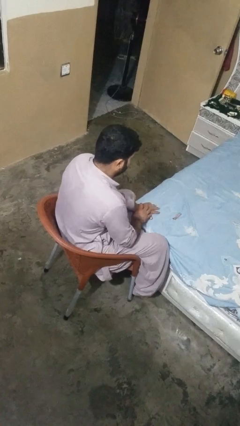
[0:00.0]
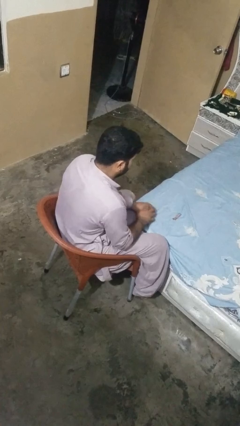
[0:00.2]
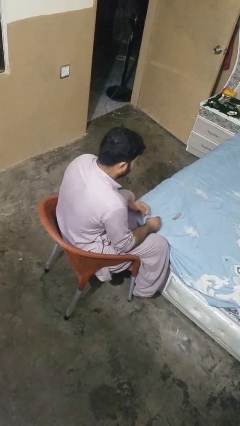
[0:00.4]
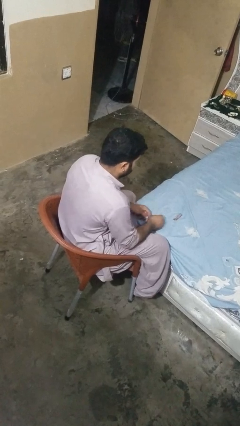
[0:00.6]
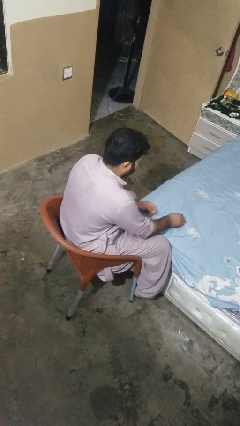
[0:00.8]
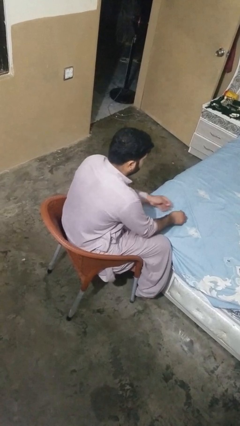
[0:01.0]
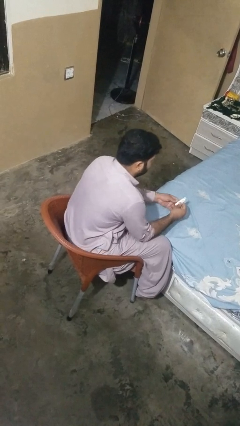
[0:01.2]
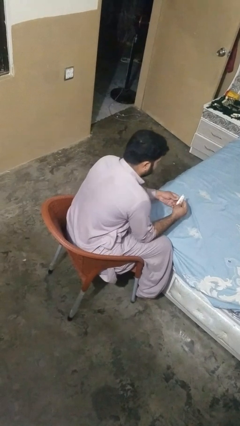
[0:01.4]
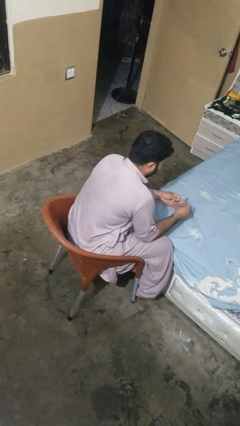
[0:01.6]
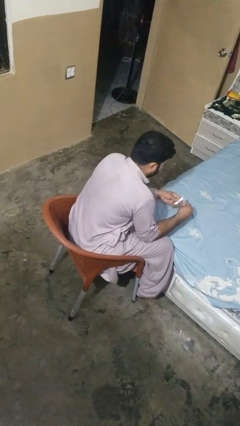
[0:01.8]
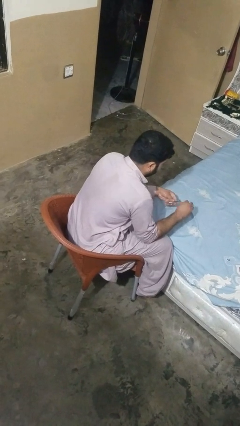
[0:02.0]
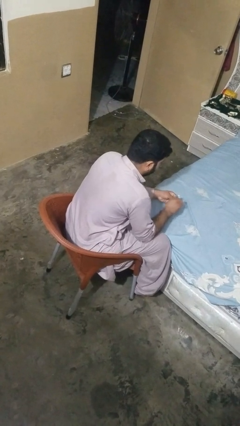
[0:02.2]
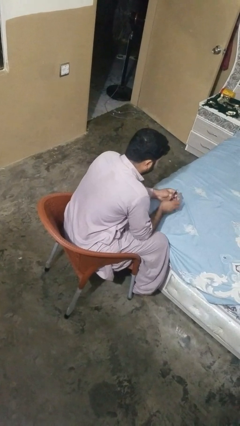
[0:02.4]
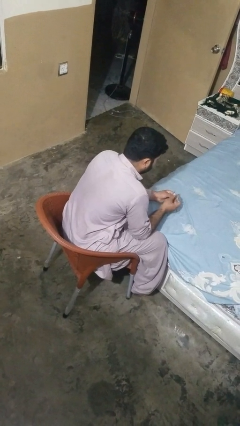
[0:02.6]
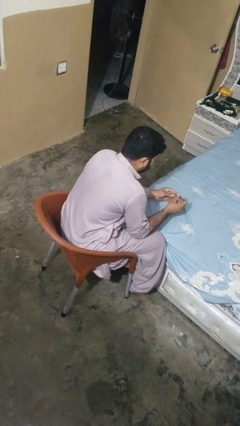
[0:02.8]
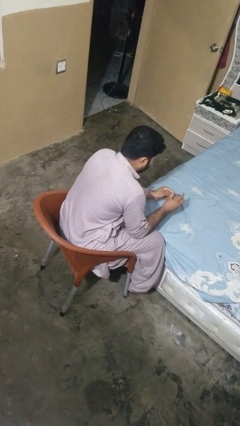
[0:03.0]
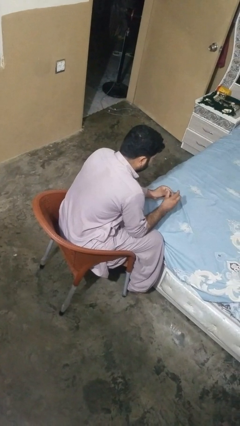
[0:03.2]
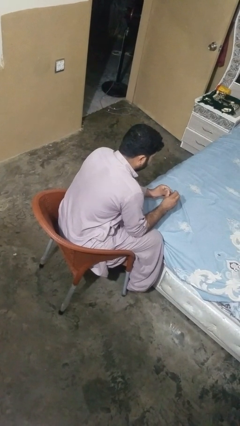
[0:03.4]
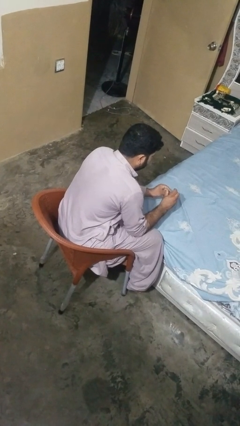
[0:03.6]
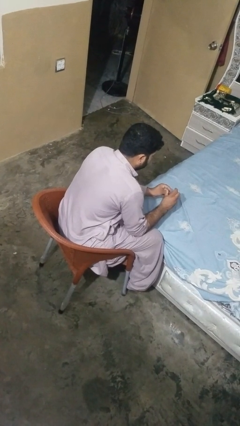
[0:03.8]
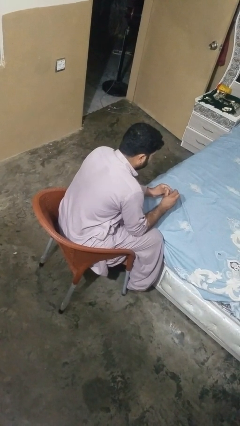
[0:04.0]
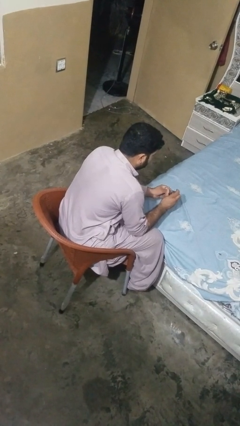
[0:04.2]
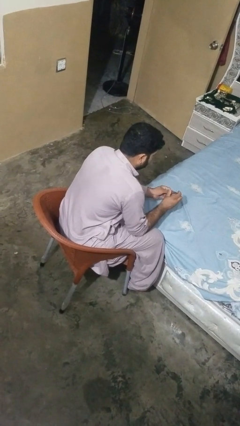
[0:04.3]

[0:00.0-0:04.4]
person clips fingernails

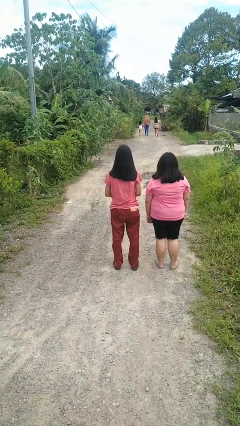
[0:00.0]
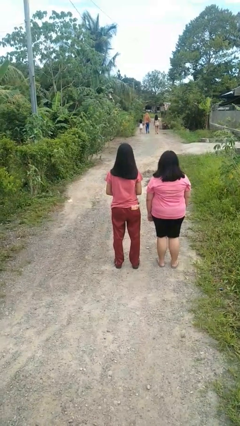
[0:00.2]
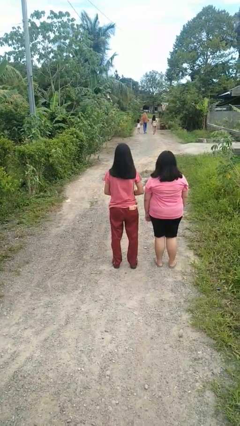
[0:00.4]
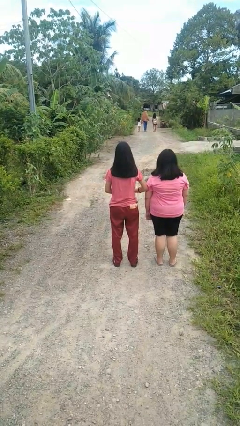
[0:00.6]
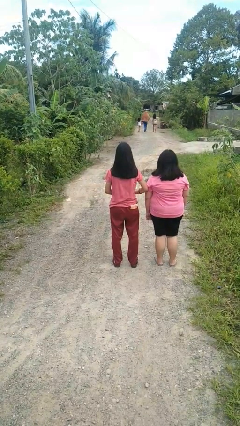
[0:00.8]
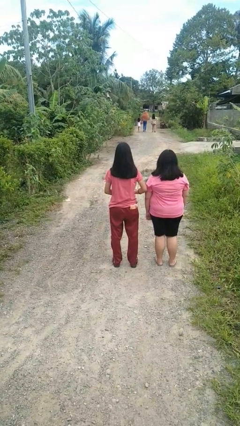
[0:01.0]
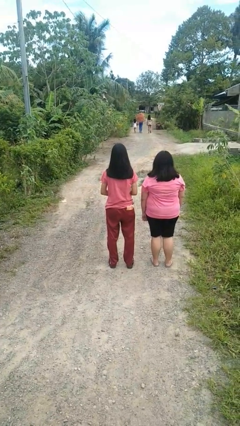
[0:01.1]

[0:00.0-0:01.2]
person nudges person with elbow

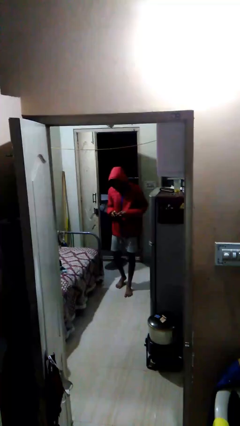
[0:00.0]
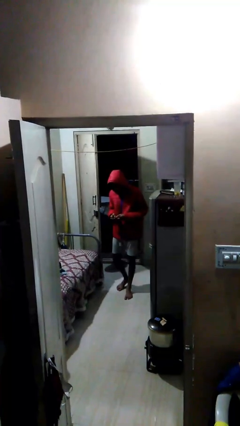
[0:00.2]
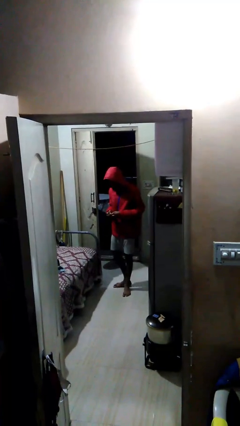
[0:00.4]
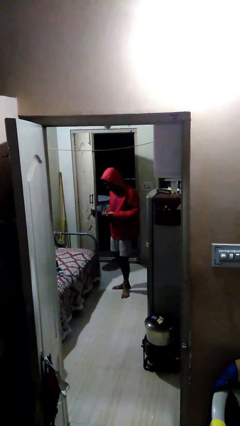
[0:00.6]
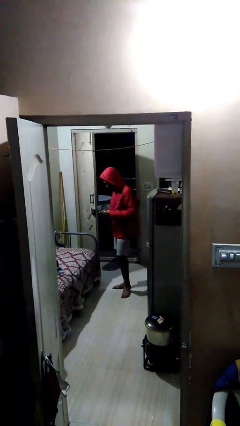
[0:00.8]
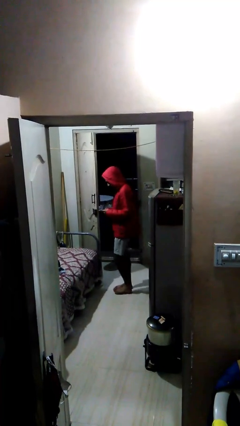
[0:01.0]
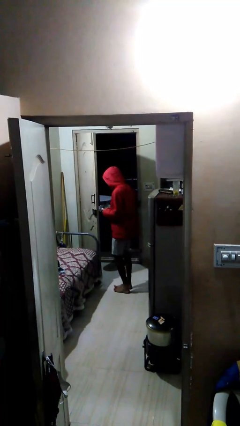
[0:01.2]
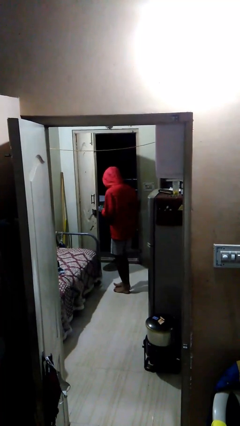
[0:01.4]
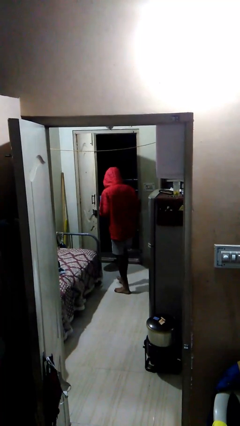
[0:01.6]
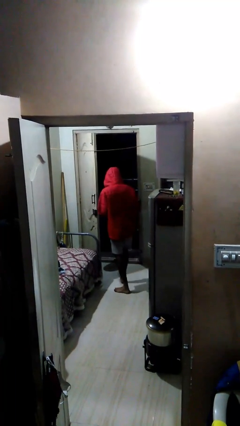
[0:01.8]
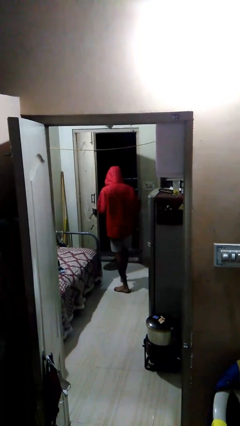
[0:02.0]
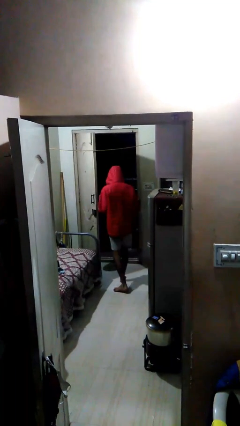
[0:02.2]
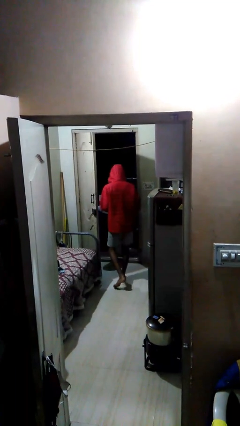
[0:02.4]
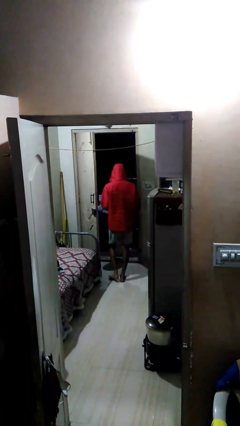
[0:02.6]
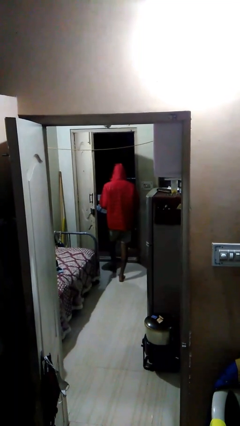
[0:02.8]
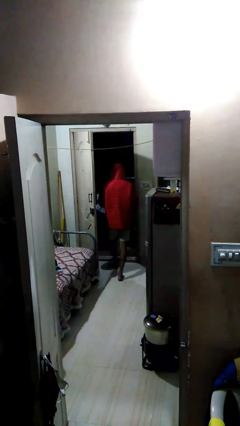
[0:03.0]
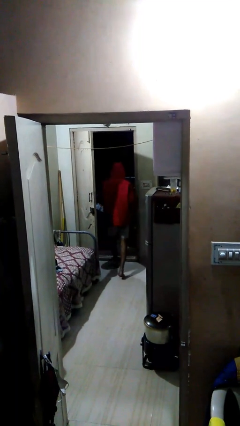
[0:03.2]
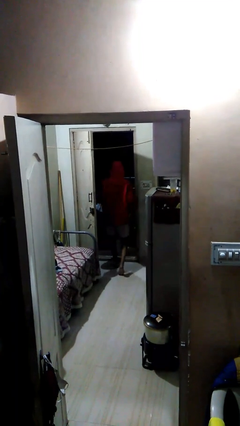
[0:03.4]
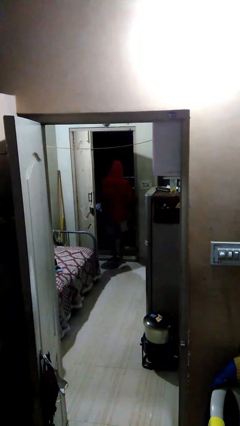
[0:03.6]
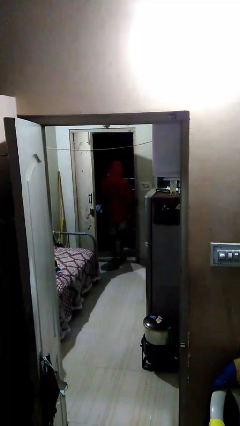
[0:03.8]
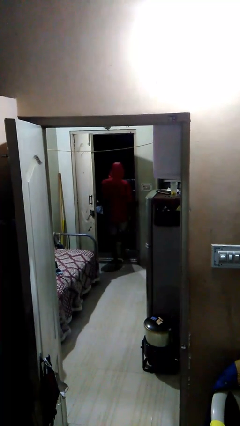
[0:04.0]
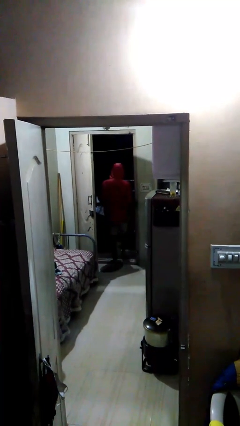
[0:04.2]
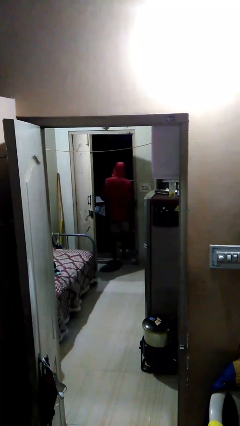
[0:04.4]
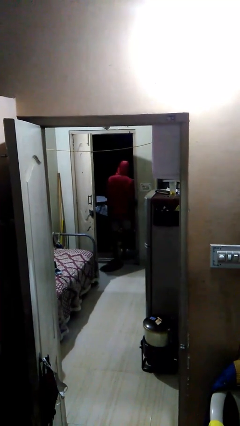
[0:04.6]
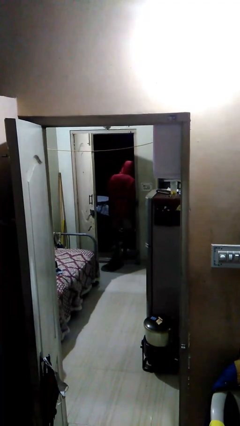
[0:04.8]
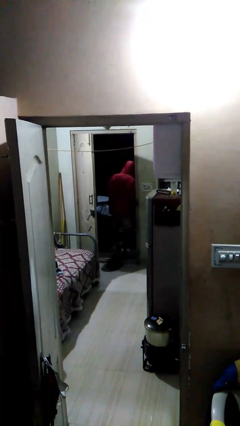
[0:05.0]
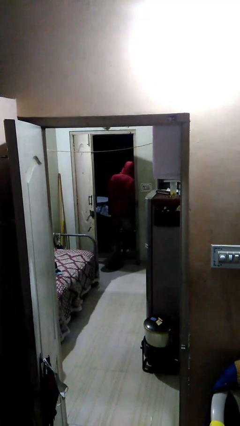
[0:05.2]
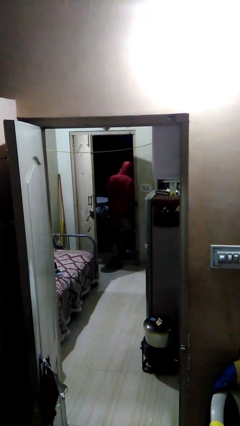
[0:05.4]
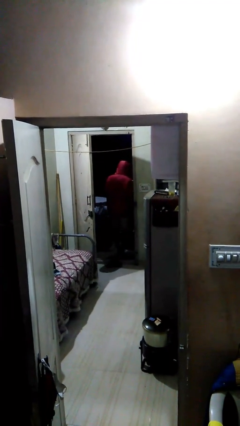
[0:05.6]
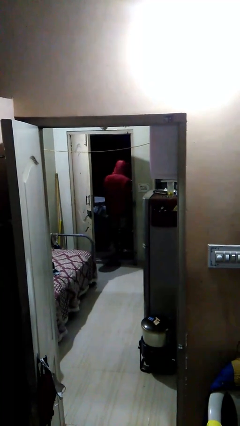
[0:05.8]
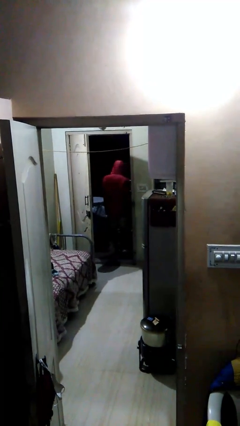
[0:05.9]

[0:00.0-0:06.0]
person exits scene through structure

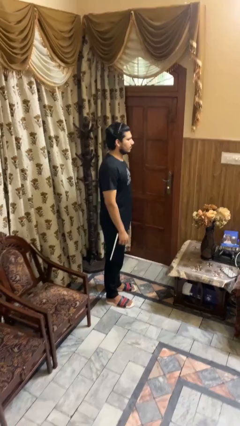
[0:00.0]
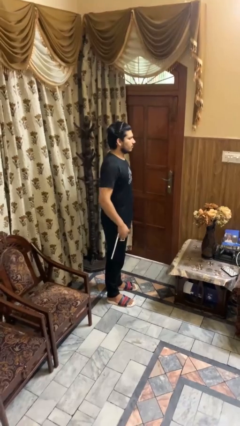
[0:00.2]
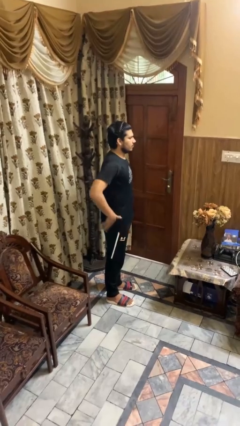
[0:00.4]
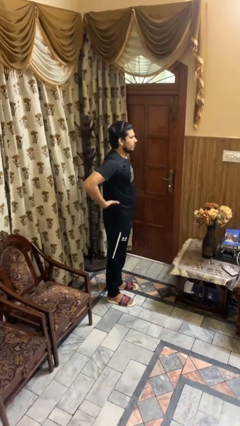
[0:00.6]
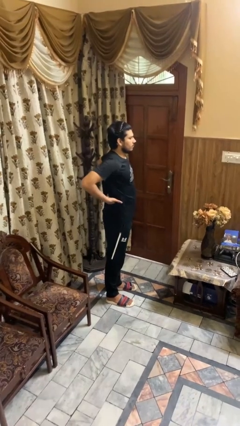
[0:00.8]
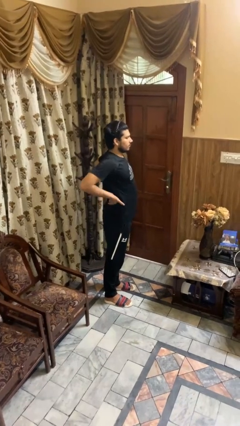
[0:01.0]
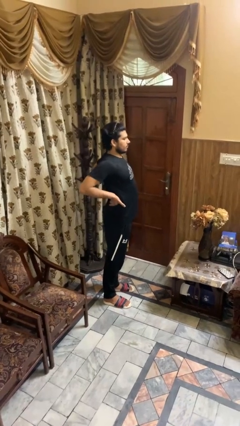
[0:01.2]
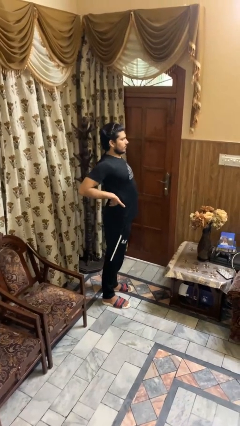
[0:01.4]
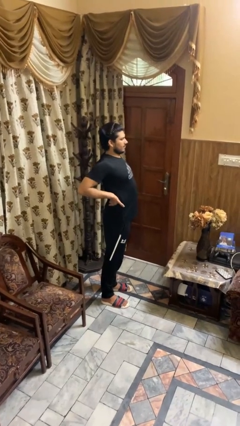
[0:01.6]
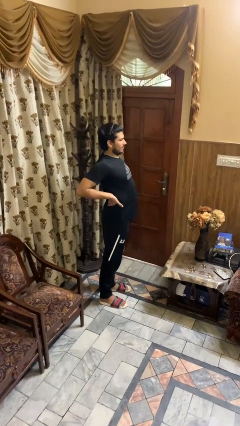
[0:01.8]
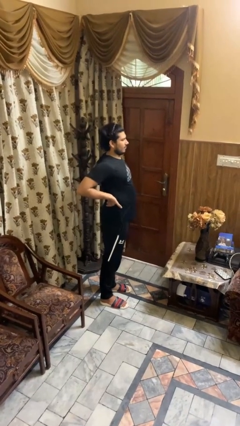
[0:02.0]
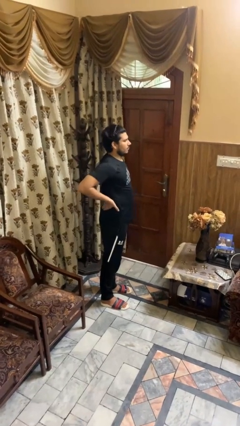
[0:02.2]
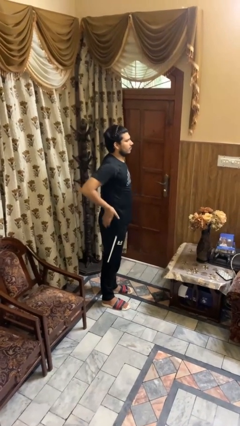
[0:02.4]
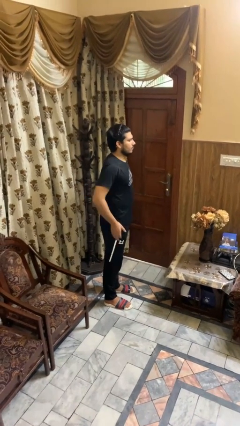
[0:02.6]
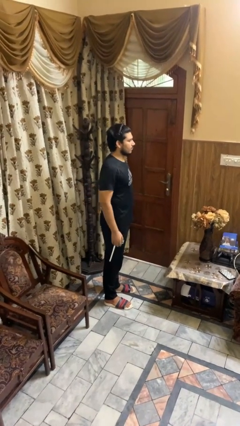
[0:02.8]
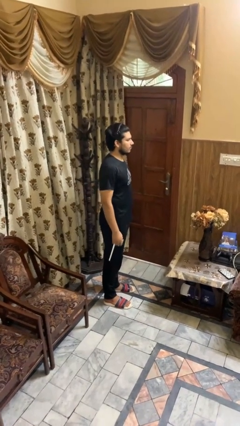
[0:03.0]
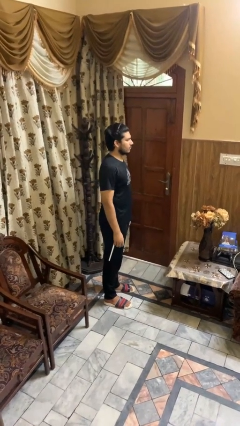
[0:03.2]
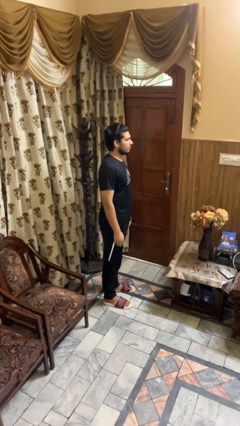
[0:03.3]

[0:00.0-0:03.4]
person stretches back

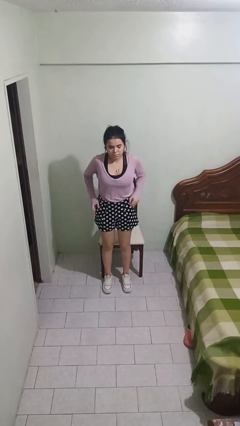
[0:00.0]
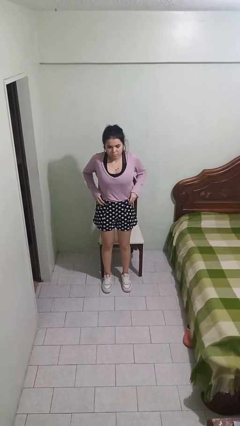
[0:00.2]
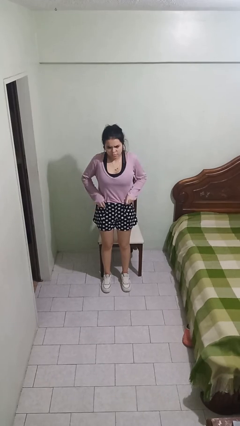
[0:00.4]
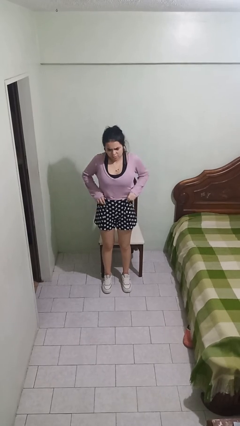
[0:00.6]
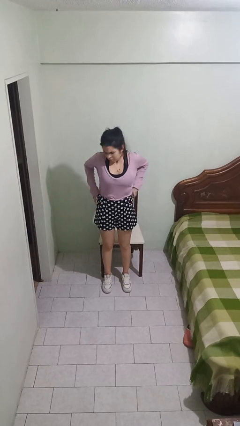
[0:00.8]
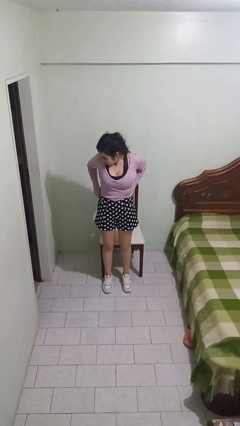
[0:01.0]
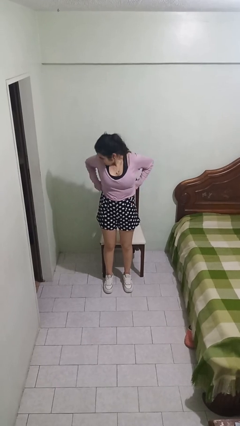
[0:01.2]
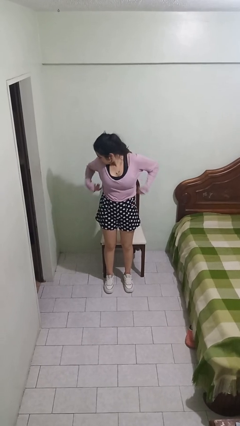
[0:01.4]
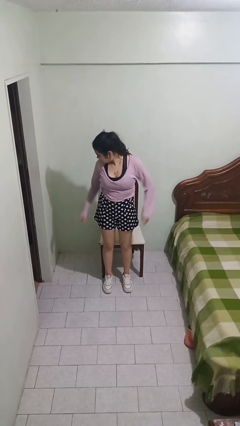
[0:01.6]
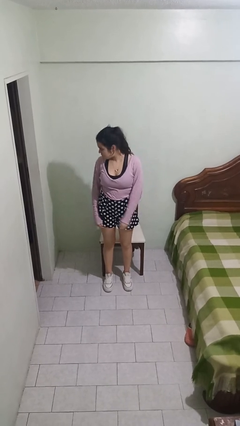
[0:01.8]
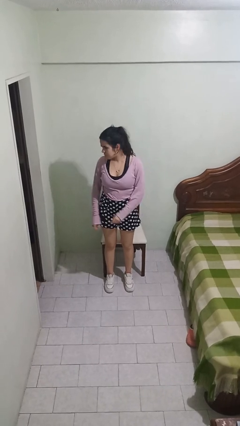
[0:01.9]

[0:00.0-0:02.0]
person hikes up pants

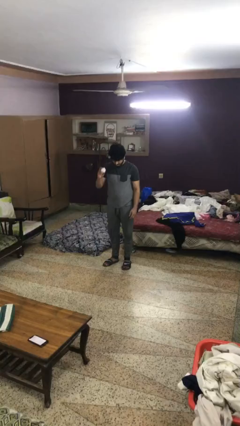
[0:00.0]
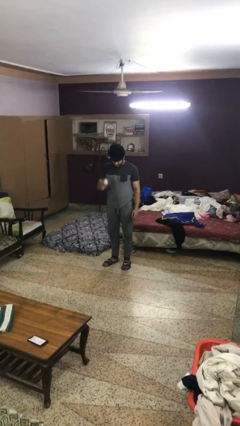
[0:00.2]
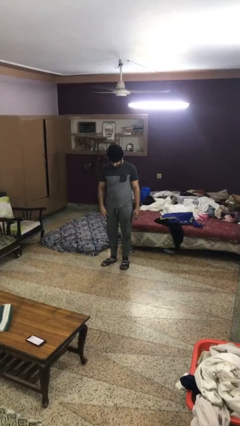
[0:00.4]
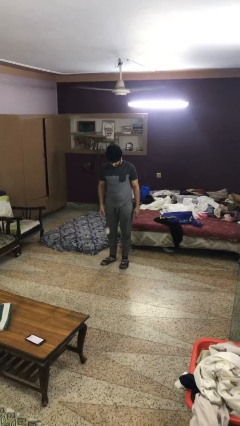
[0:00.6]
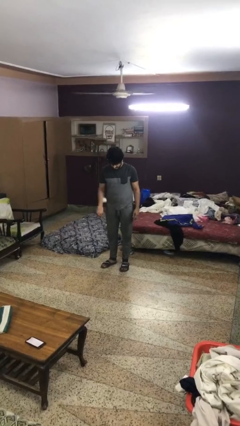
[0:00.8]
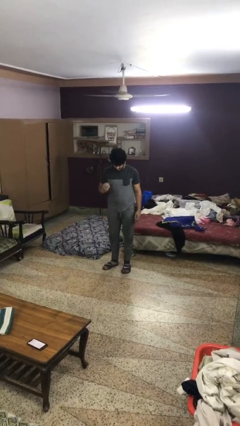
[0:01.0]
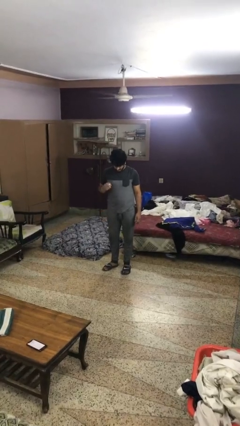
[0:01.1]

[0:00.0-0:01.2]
person bounces ball on floor
